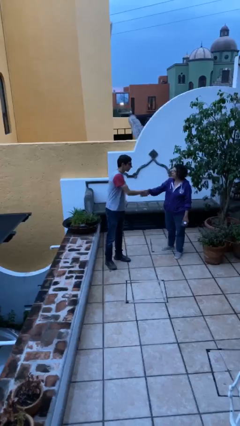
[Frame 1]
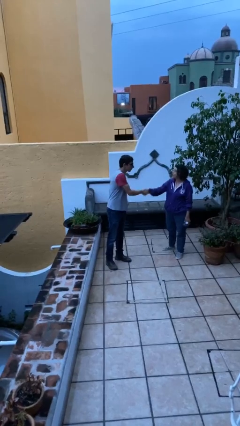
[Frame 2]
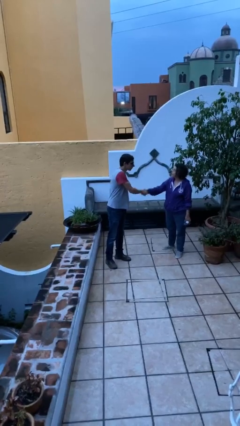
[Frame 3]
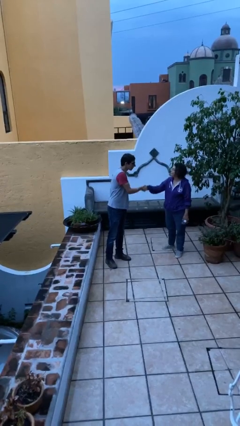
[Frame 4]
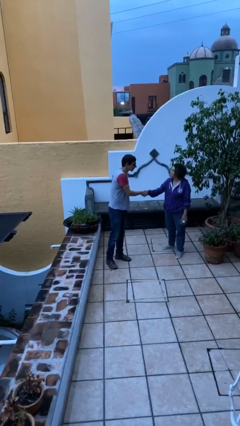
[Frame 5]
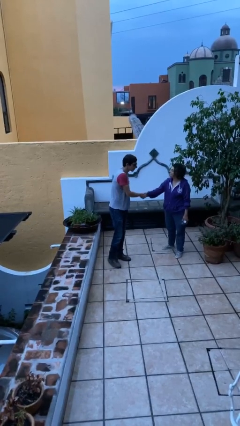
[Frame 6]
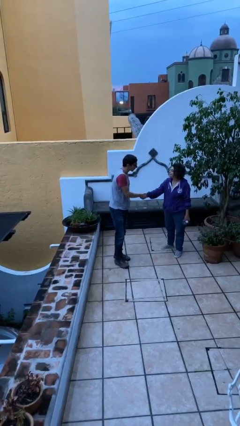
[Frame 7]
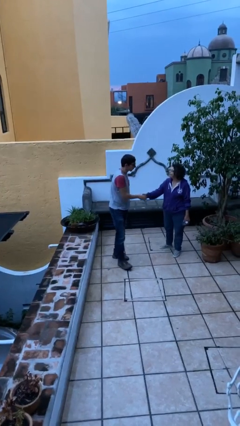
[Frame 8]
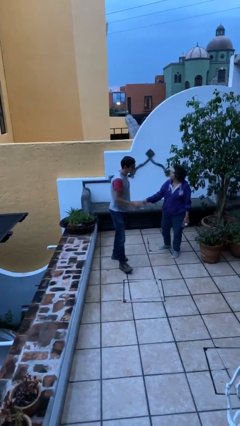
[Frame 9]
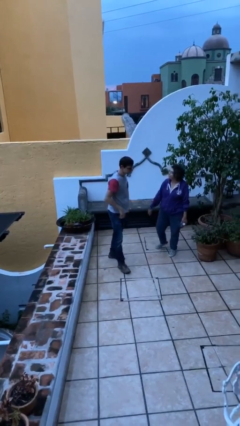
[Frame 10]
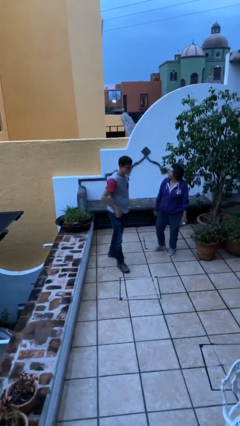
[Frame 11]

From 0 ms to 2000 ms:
person shakes hand

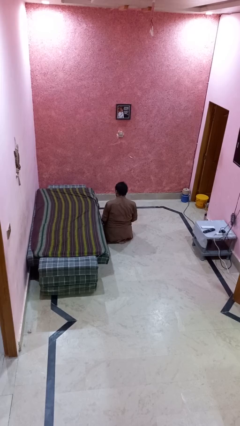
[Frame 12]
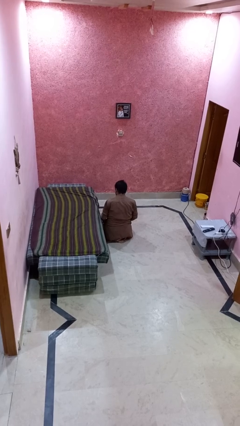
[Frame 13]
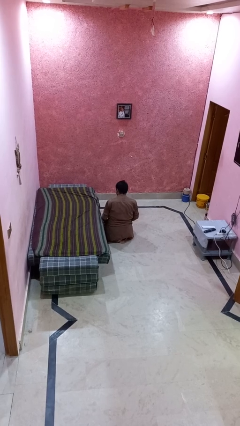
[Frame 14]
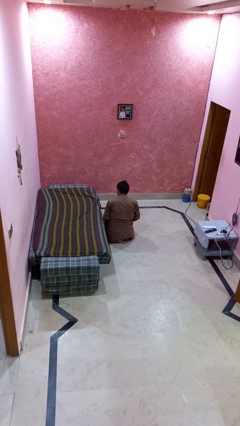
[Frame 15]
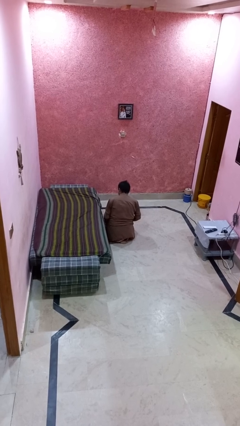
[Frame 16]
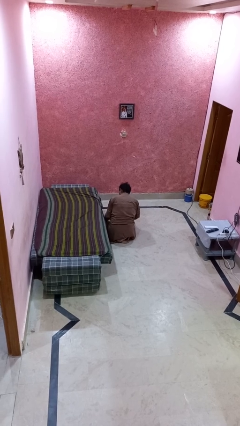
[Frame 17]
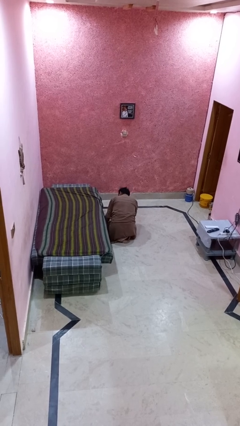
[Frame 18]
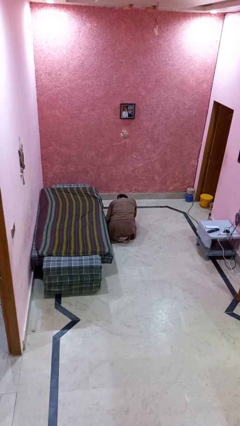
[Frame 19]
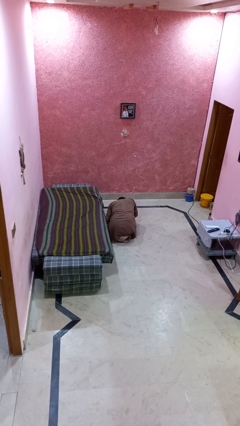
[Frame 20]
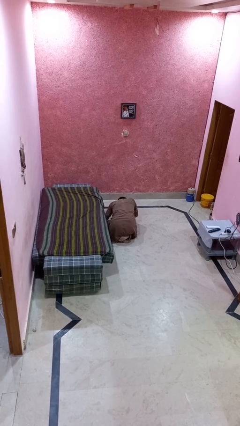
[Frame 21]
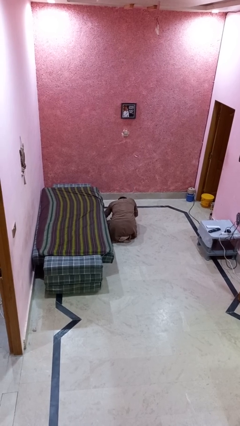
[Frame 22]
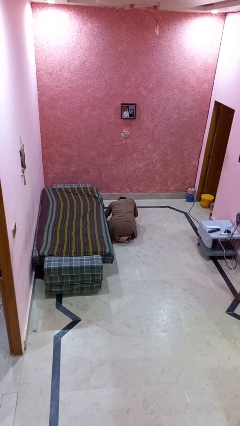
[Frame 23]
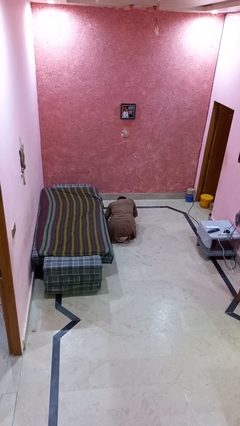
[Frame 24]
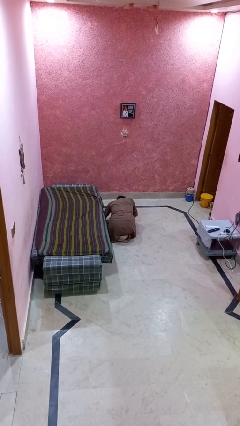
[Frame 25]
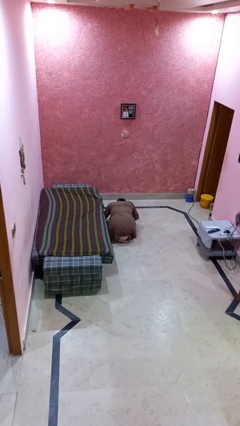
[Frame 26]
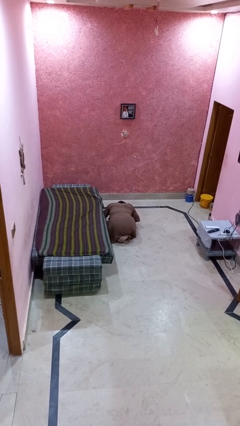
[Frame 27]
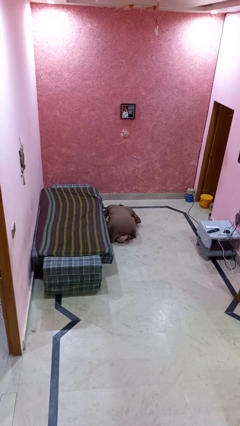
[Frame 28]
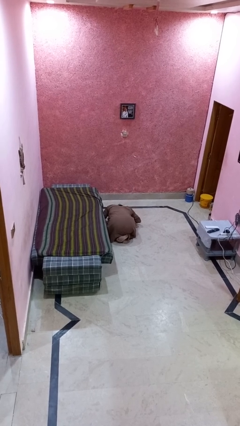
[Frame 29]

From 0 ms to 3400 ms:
person searches under bed

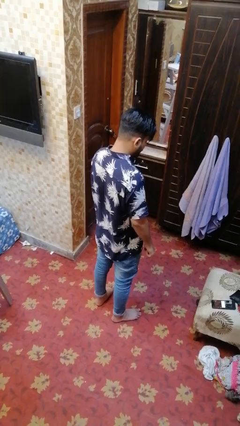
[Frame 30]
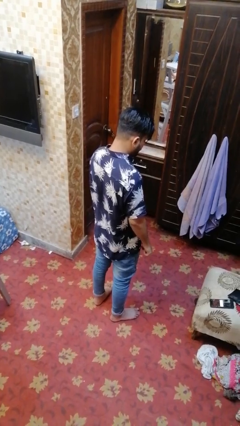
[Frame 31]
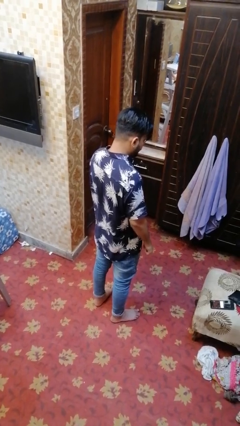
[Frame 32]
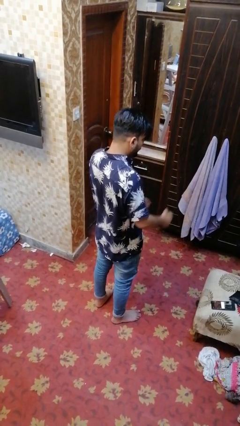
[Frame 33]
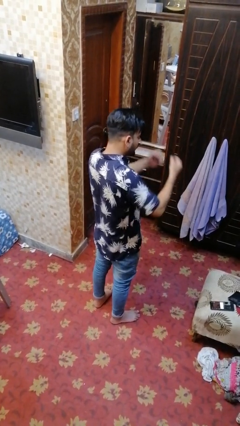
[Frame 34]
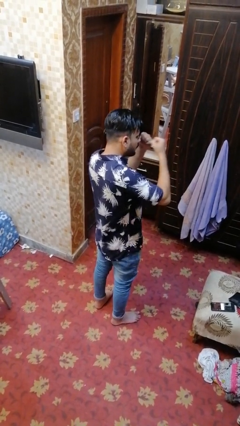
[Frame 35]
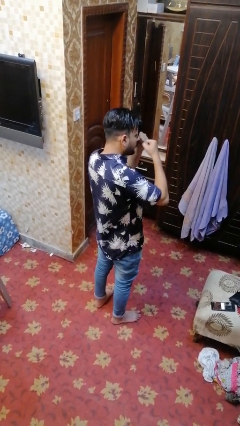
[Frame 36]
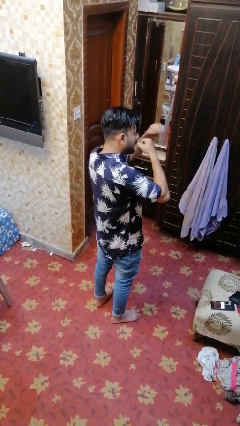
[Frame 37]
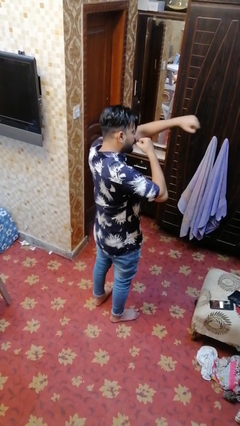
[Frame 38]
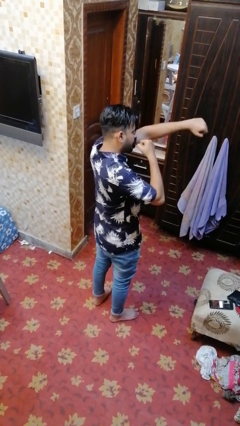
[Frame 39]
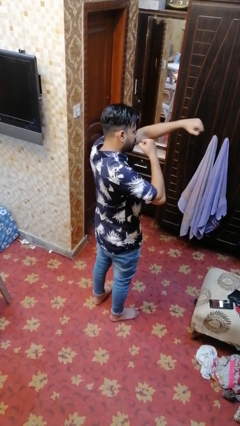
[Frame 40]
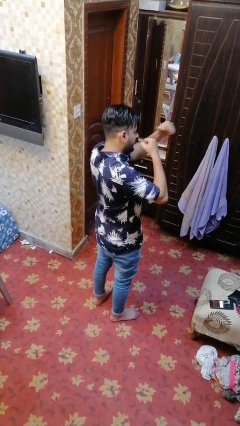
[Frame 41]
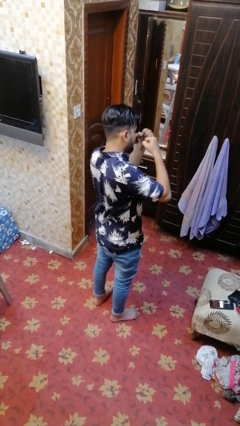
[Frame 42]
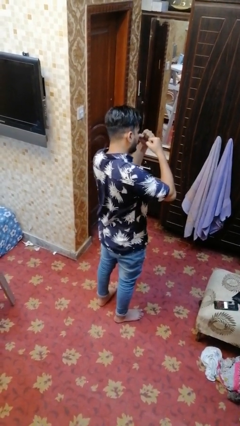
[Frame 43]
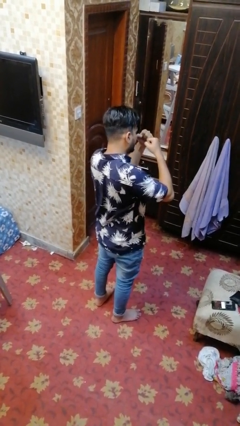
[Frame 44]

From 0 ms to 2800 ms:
person punches

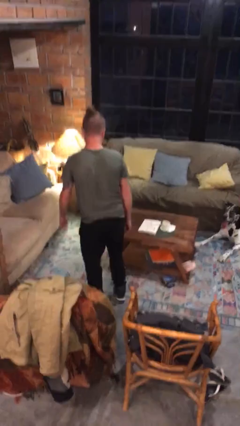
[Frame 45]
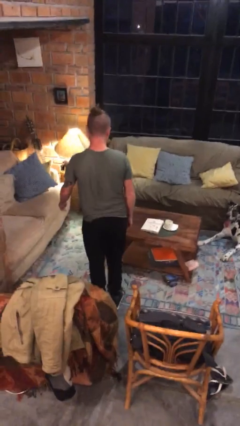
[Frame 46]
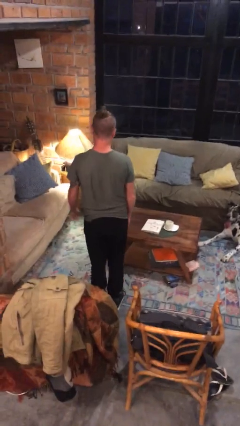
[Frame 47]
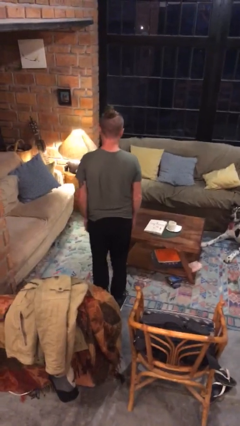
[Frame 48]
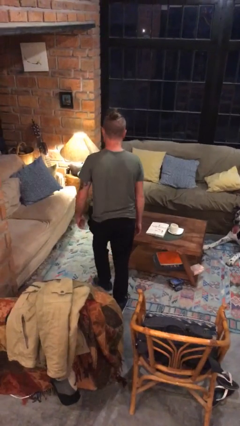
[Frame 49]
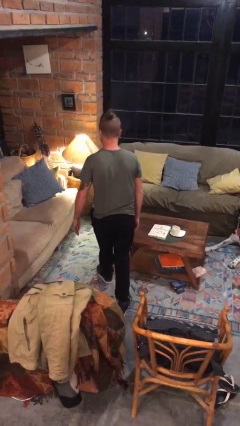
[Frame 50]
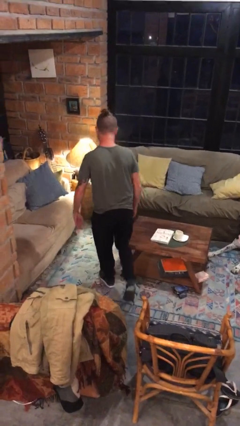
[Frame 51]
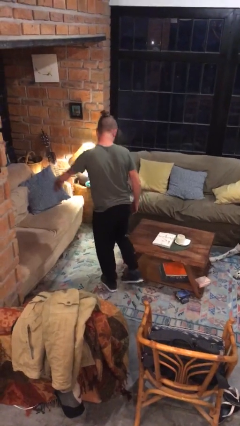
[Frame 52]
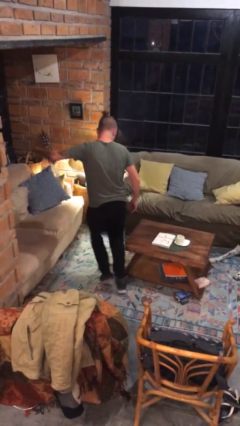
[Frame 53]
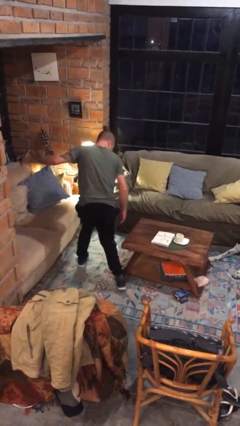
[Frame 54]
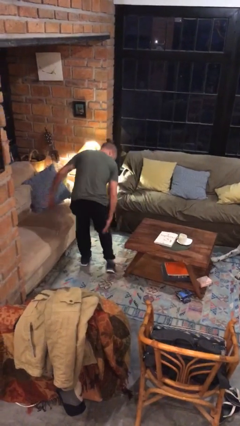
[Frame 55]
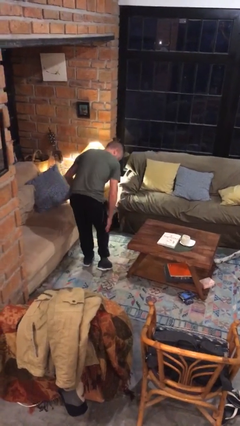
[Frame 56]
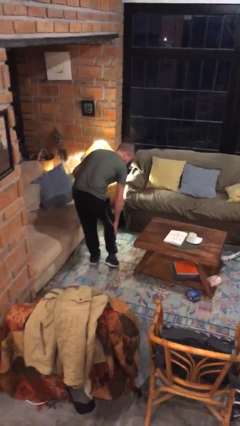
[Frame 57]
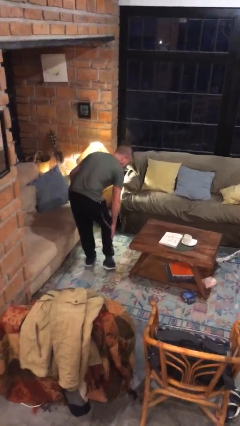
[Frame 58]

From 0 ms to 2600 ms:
person bumps into table

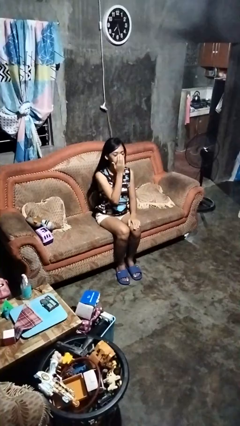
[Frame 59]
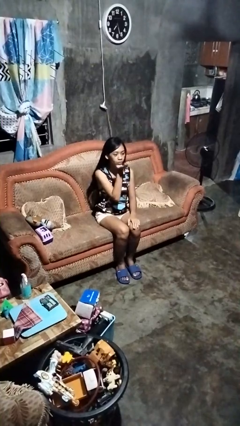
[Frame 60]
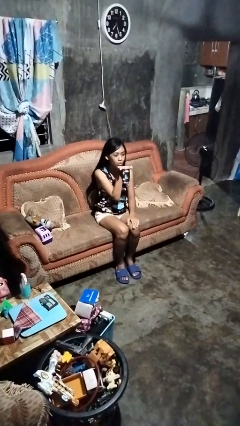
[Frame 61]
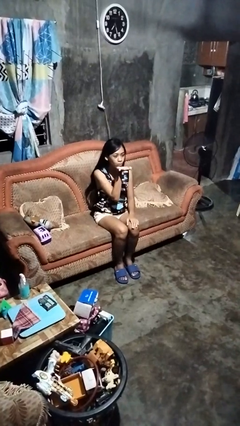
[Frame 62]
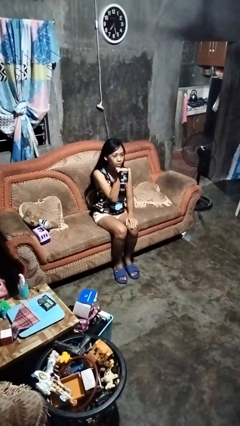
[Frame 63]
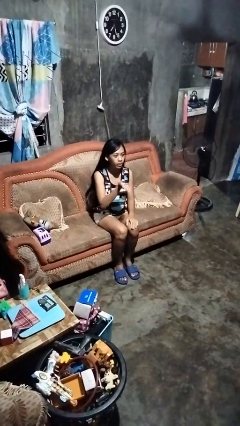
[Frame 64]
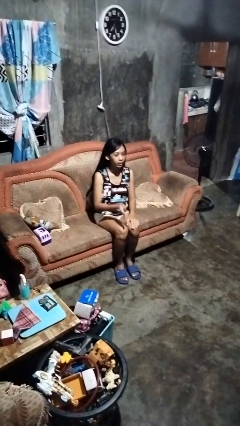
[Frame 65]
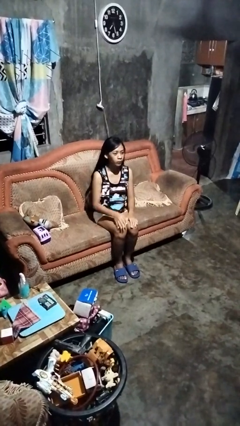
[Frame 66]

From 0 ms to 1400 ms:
person gestures blow kiss

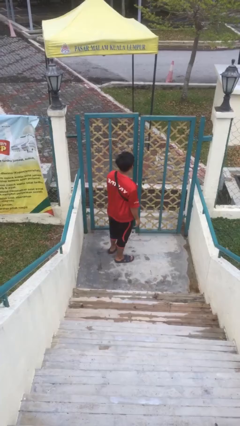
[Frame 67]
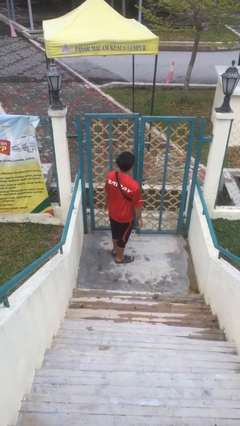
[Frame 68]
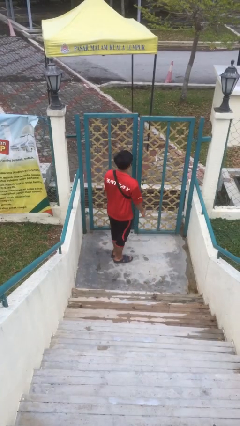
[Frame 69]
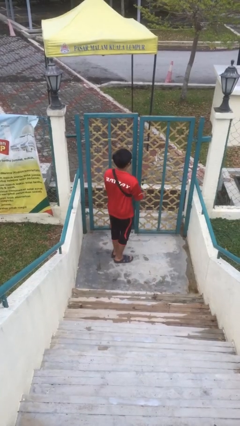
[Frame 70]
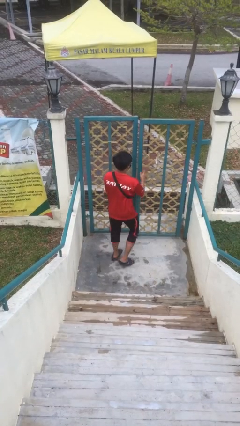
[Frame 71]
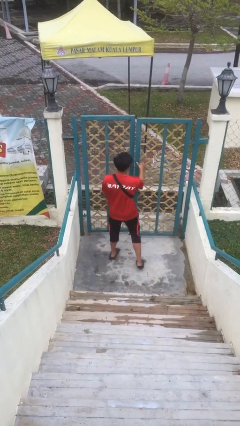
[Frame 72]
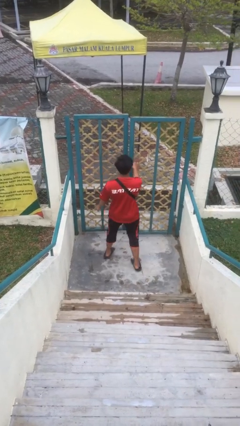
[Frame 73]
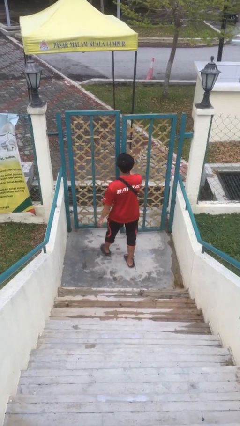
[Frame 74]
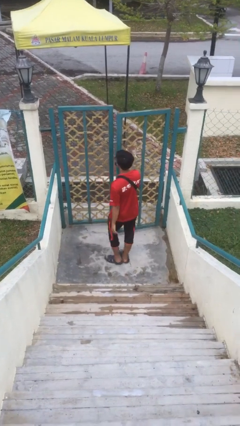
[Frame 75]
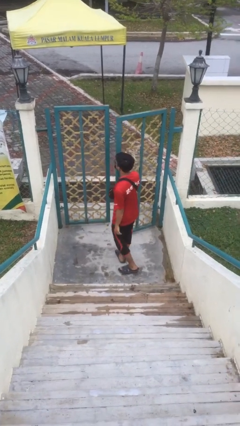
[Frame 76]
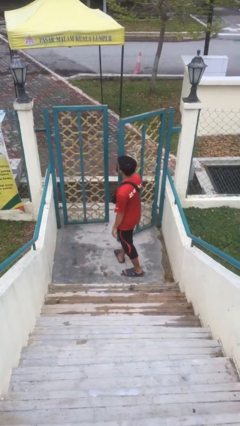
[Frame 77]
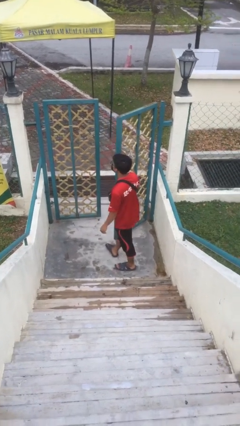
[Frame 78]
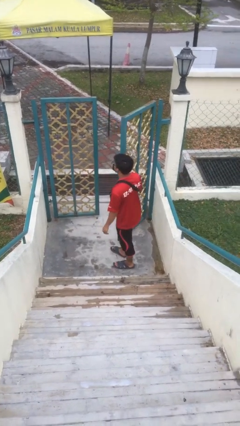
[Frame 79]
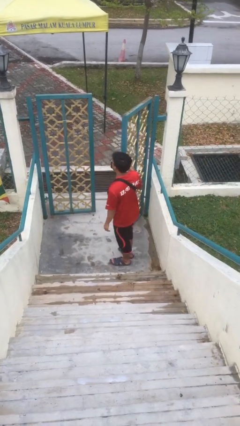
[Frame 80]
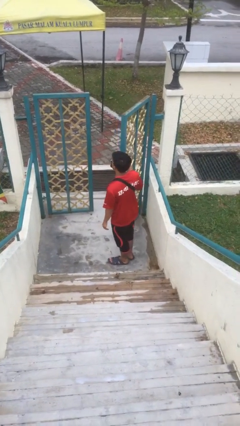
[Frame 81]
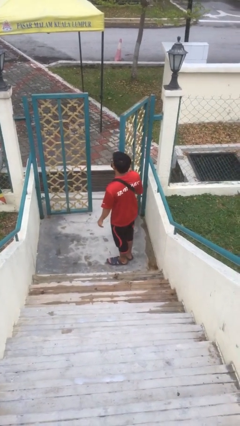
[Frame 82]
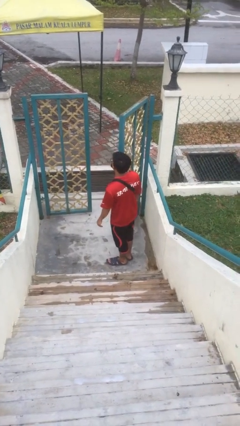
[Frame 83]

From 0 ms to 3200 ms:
person opens facility door

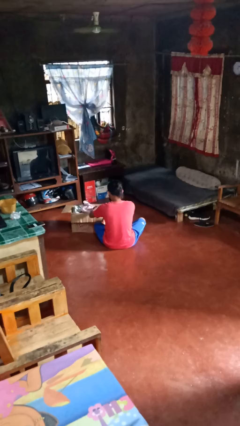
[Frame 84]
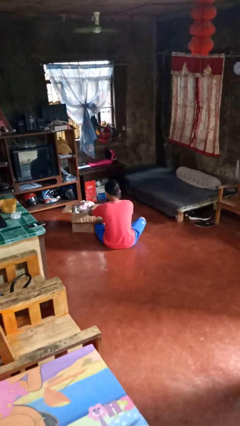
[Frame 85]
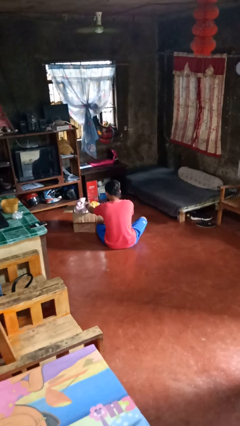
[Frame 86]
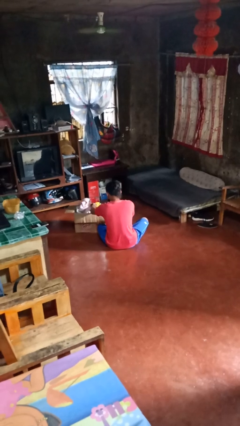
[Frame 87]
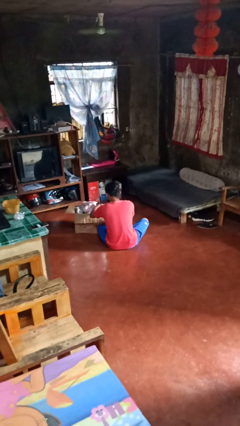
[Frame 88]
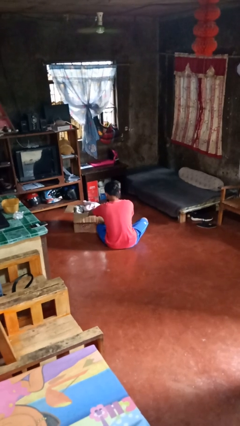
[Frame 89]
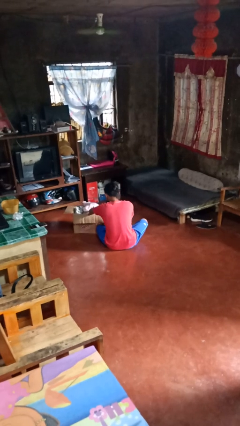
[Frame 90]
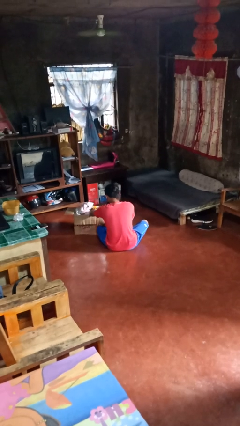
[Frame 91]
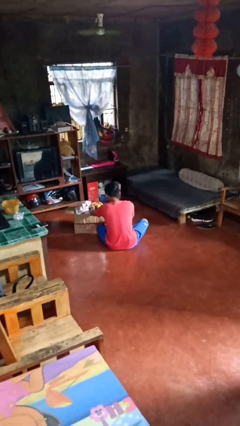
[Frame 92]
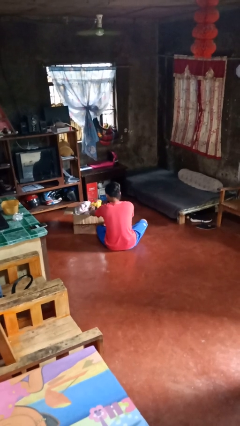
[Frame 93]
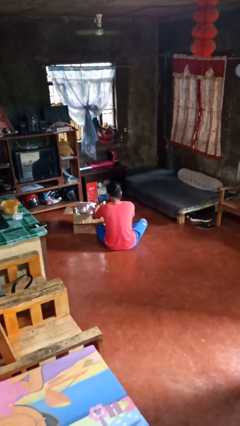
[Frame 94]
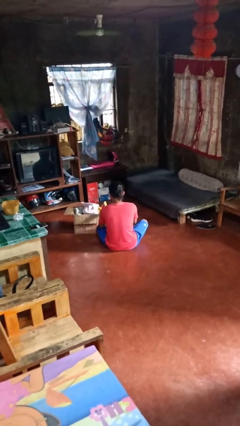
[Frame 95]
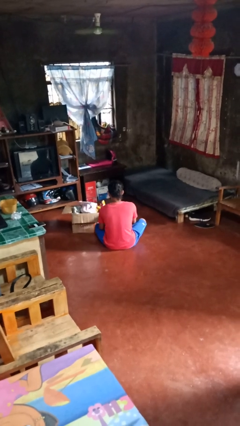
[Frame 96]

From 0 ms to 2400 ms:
person searches in box
